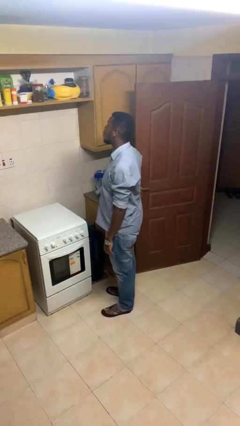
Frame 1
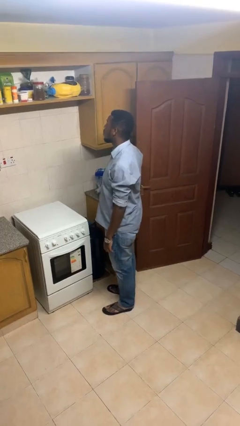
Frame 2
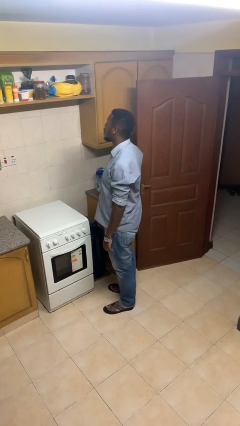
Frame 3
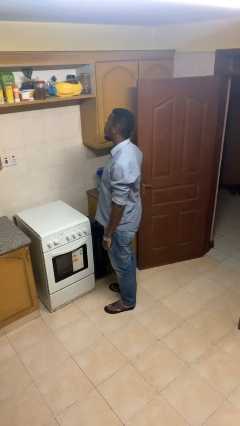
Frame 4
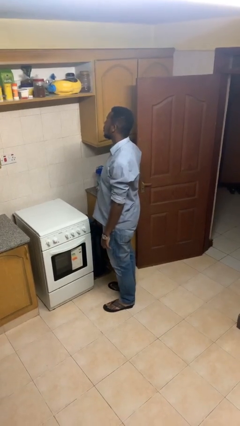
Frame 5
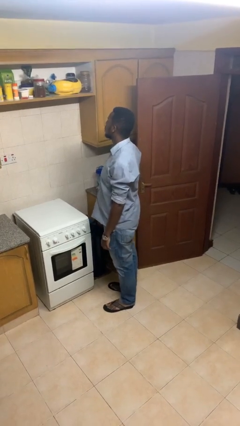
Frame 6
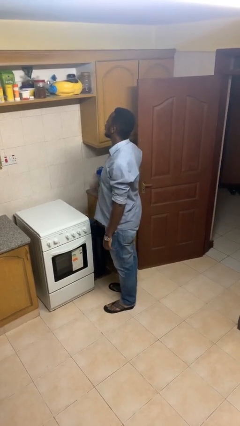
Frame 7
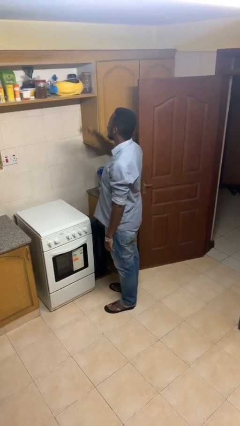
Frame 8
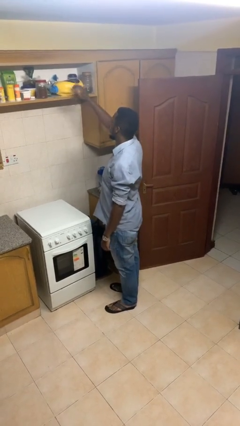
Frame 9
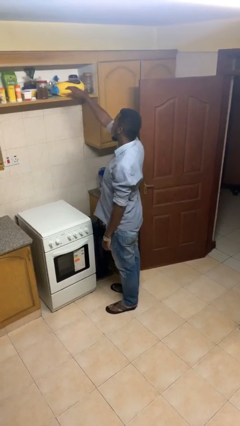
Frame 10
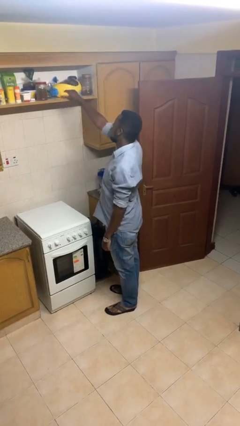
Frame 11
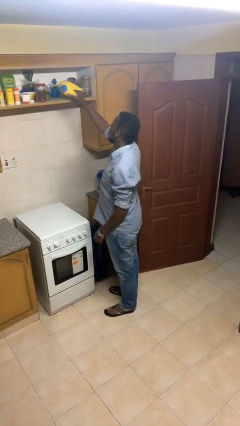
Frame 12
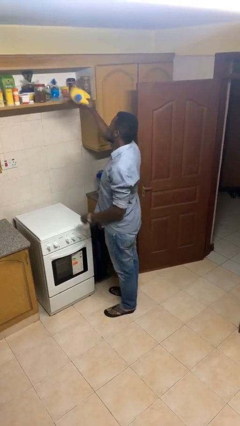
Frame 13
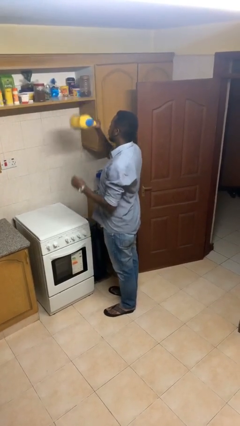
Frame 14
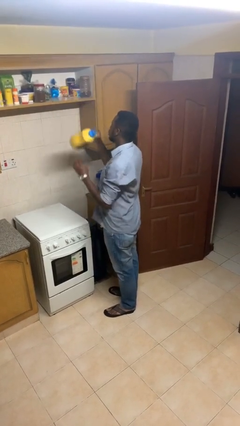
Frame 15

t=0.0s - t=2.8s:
person picks up object from shelf

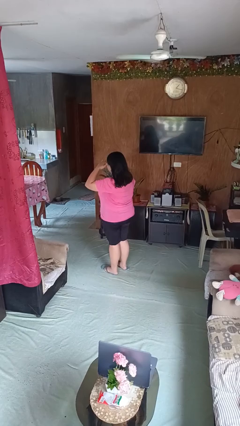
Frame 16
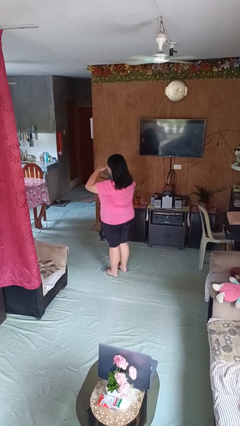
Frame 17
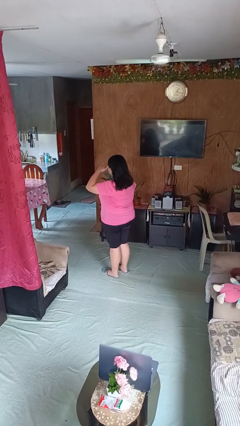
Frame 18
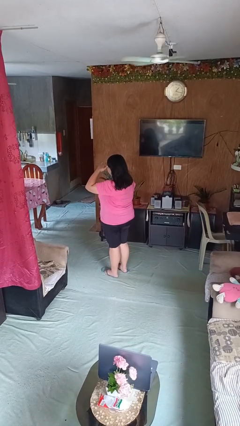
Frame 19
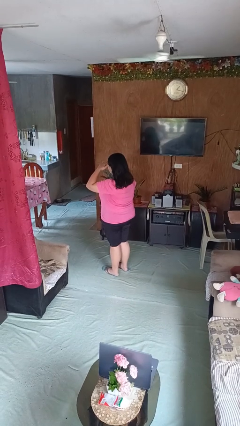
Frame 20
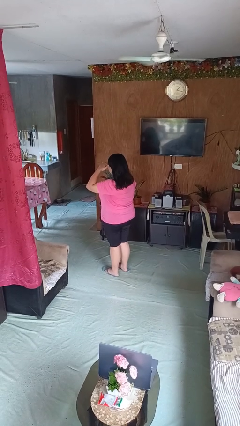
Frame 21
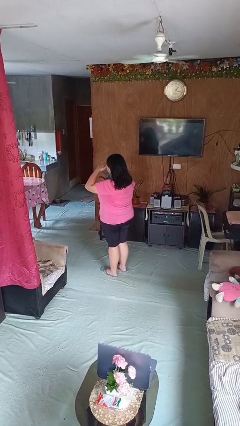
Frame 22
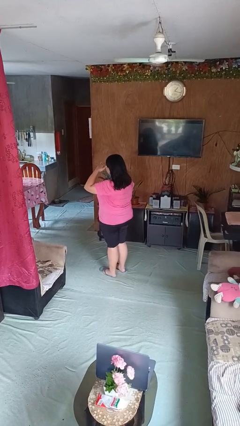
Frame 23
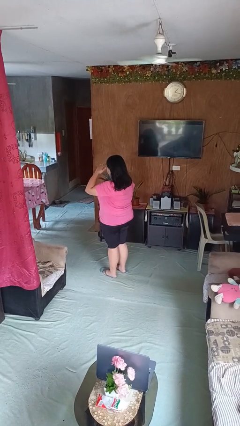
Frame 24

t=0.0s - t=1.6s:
person salutes

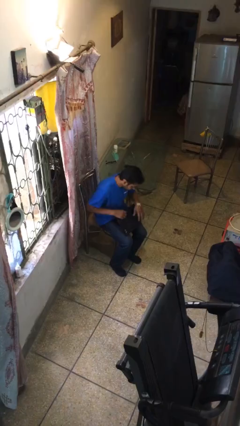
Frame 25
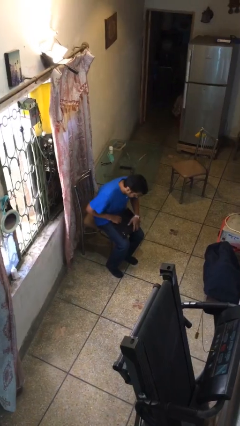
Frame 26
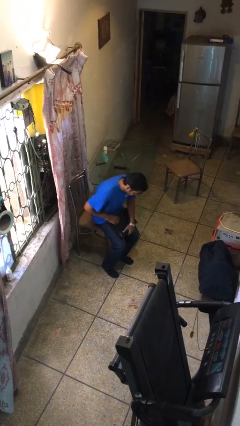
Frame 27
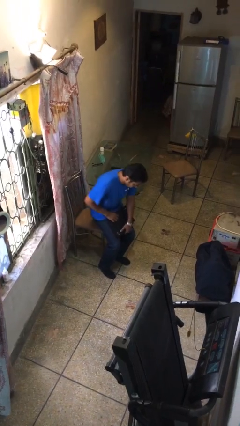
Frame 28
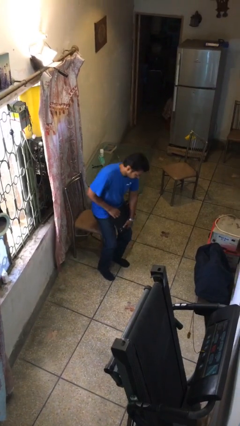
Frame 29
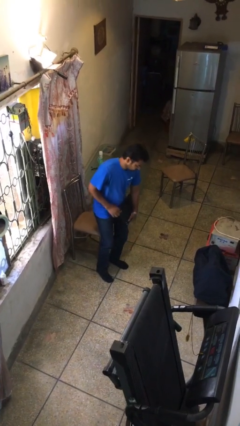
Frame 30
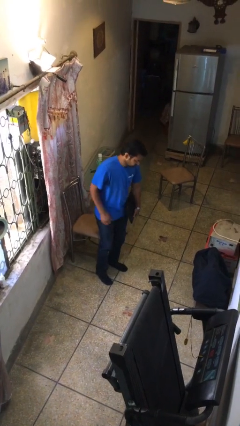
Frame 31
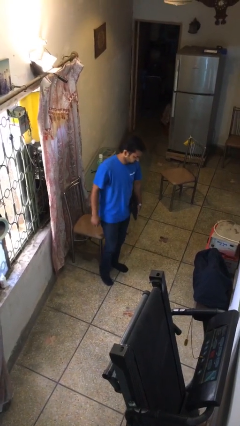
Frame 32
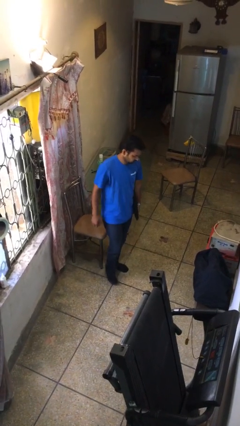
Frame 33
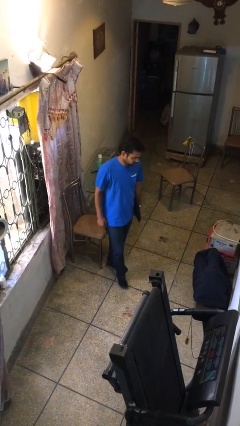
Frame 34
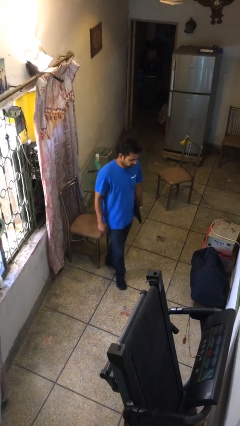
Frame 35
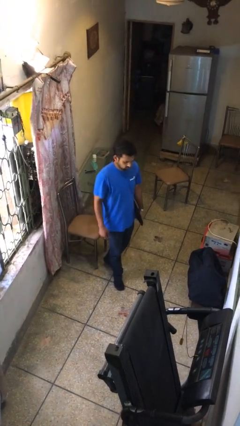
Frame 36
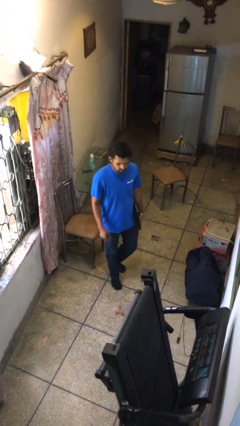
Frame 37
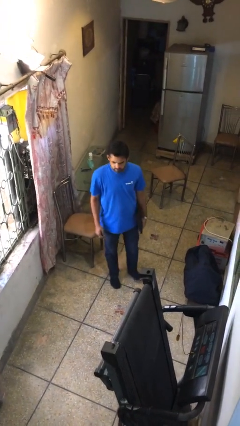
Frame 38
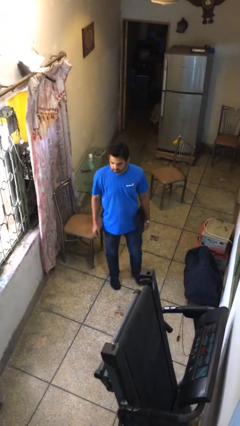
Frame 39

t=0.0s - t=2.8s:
person stands up

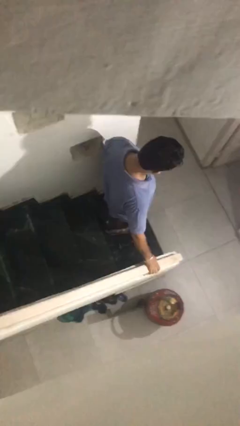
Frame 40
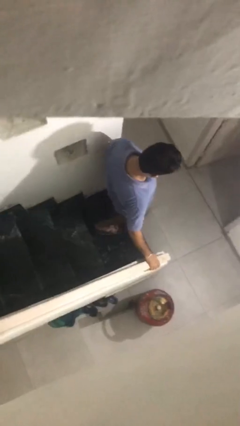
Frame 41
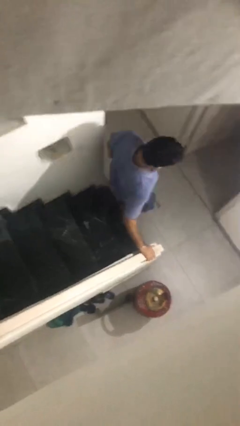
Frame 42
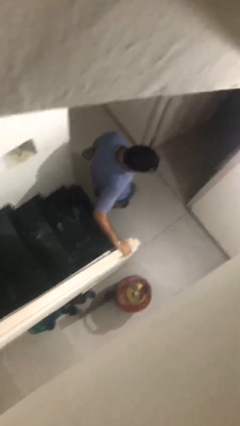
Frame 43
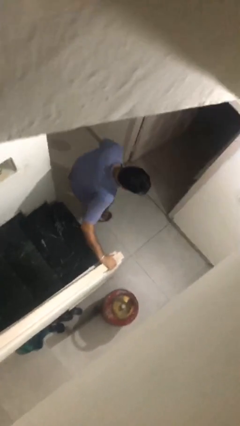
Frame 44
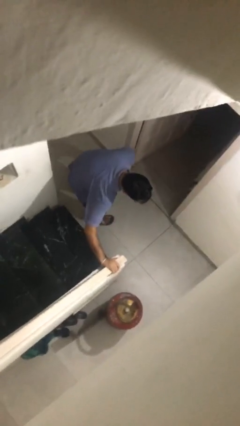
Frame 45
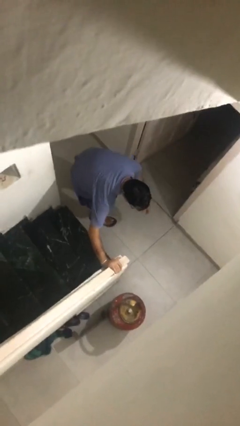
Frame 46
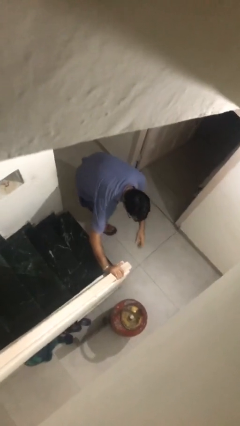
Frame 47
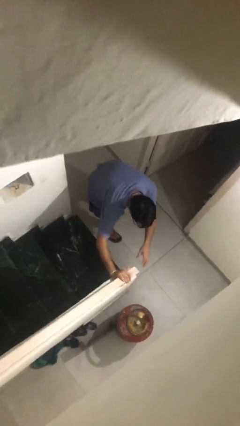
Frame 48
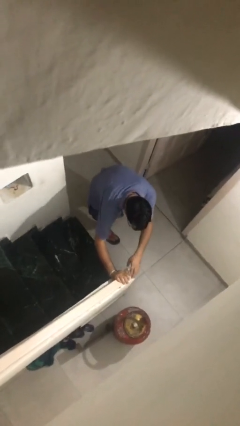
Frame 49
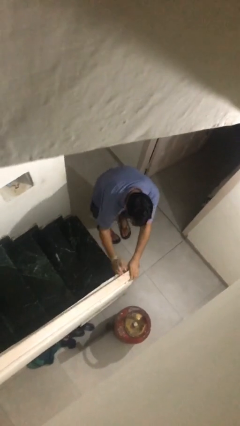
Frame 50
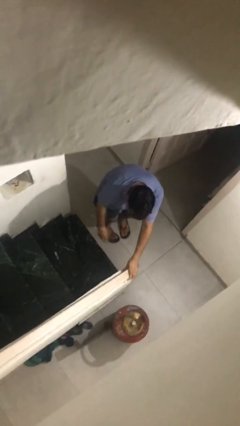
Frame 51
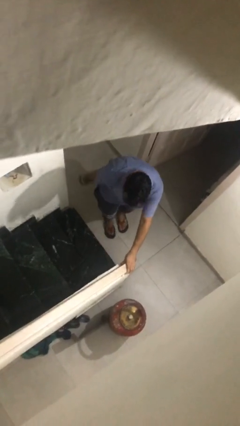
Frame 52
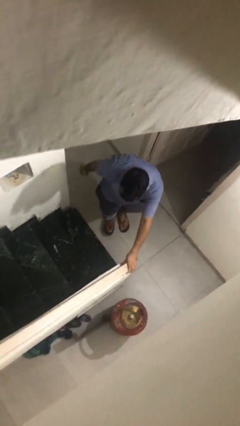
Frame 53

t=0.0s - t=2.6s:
person trips on stair

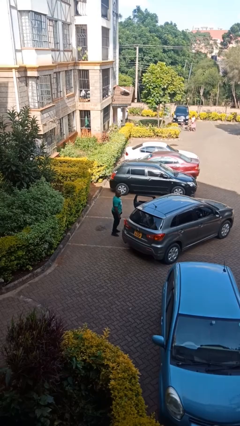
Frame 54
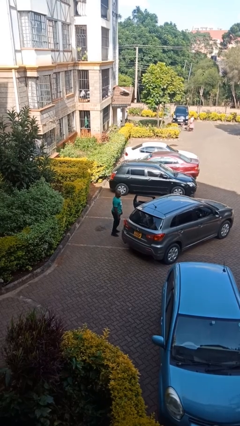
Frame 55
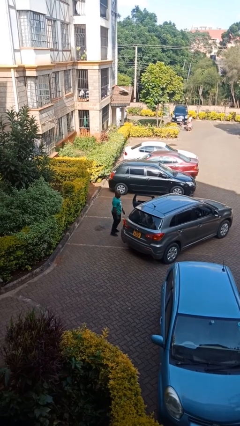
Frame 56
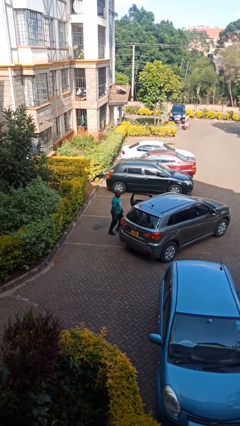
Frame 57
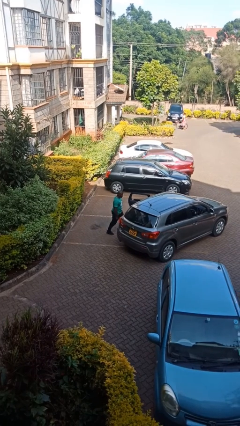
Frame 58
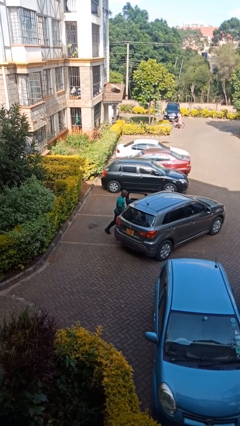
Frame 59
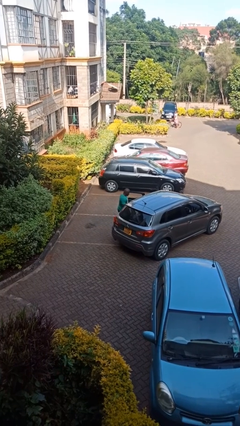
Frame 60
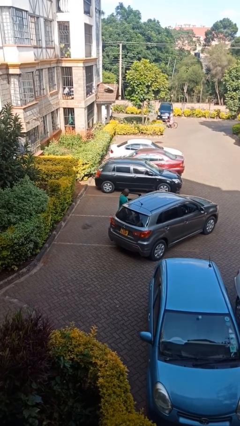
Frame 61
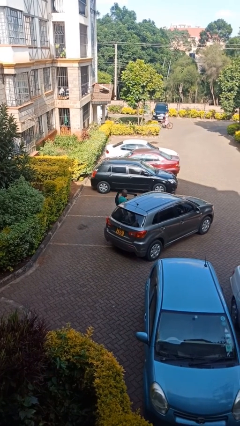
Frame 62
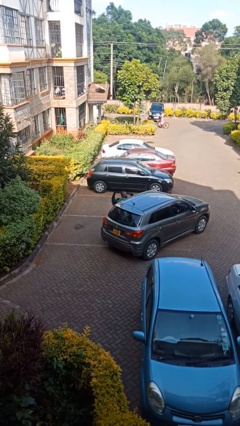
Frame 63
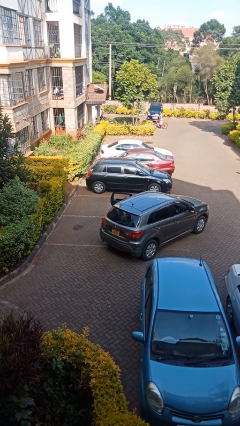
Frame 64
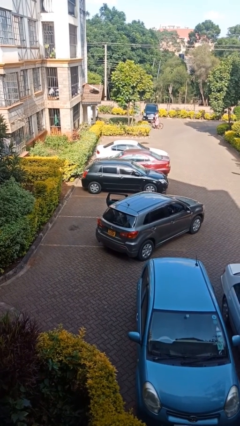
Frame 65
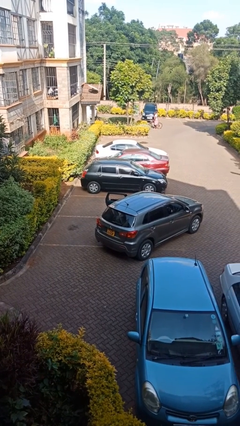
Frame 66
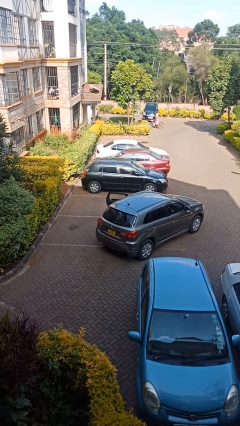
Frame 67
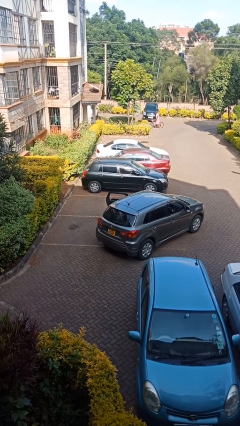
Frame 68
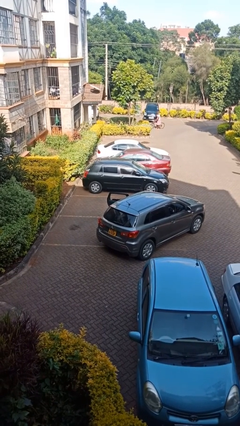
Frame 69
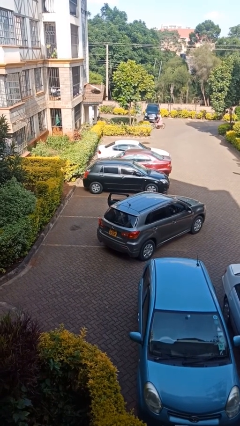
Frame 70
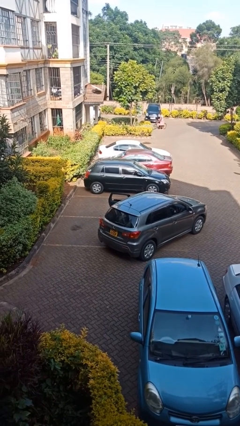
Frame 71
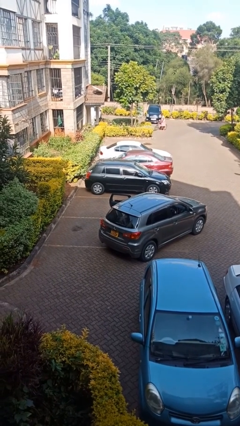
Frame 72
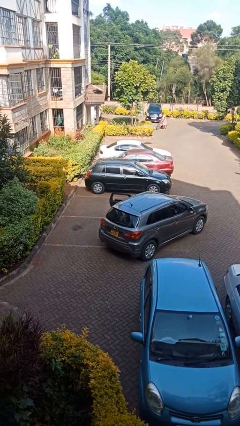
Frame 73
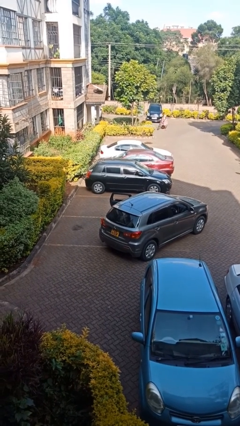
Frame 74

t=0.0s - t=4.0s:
person enters car

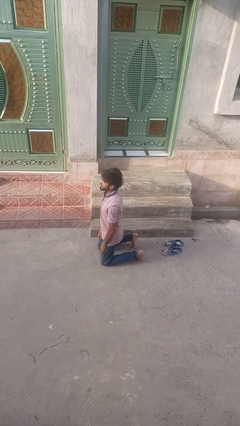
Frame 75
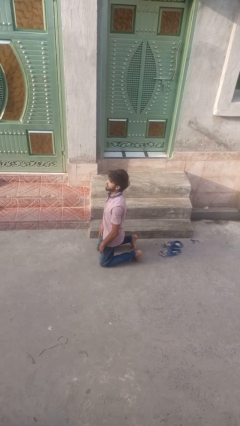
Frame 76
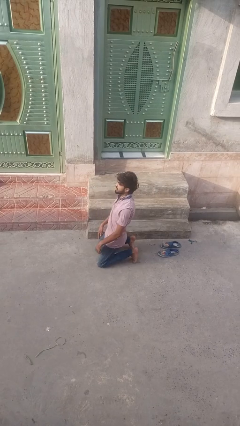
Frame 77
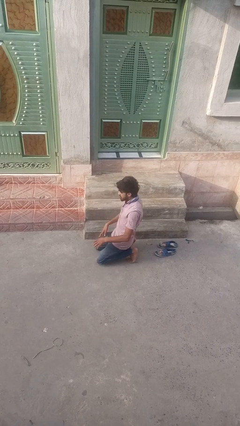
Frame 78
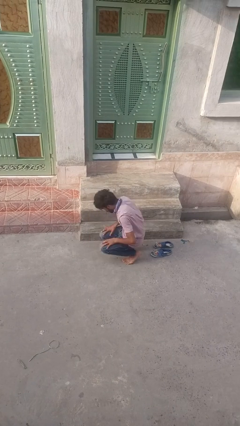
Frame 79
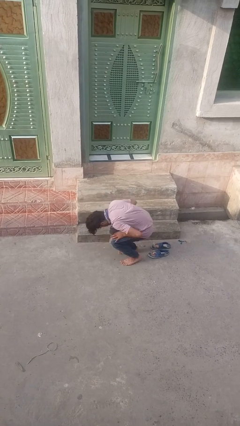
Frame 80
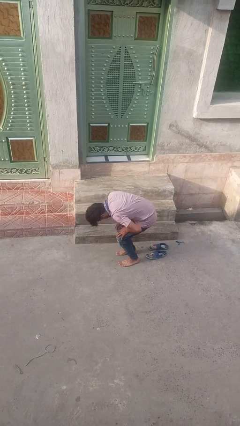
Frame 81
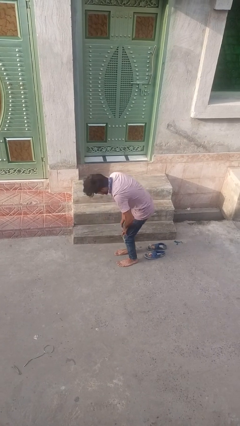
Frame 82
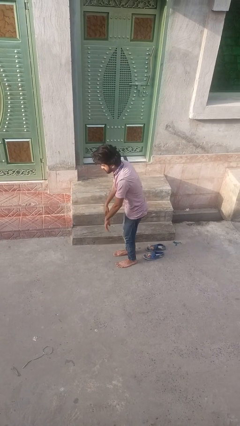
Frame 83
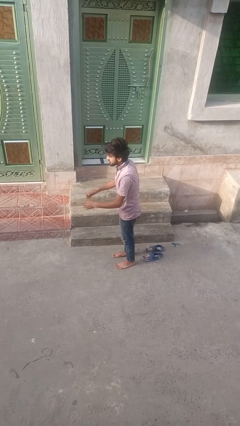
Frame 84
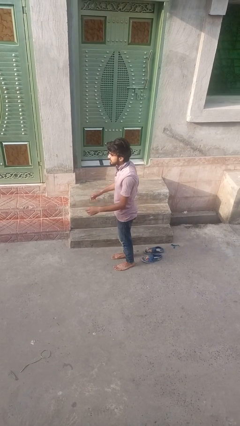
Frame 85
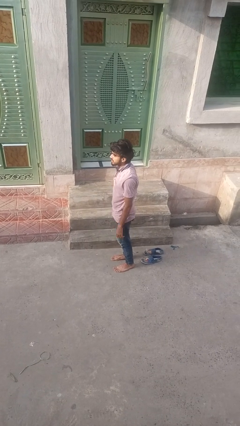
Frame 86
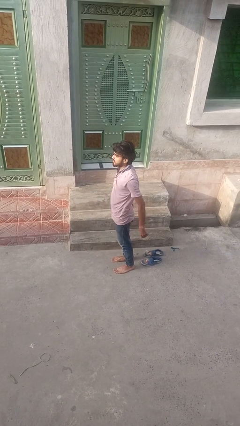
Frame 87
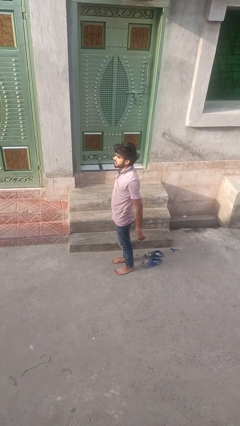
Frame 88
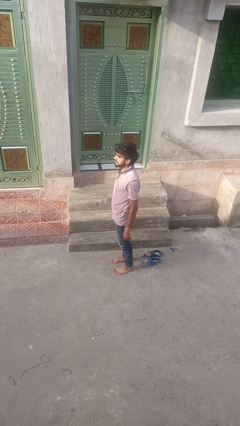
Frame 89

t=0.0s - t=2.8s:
person stands up from floor

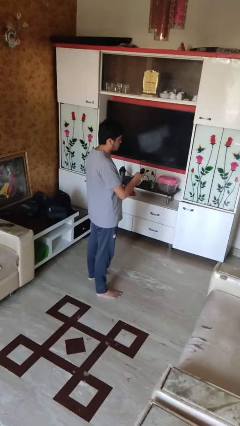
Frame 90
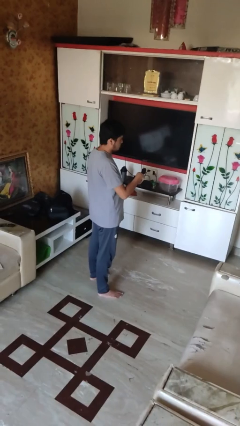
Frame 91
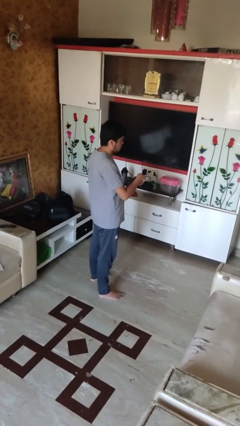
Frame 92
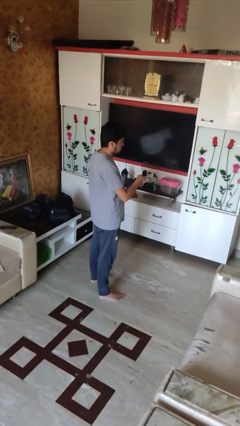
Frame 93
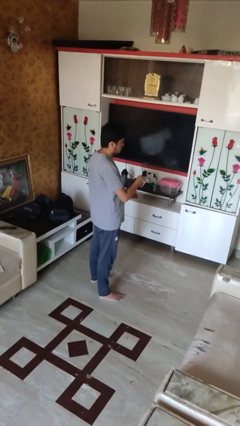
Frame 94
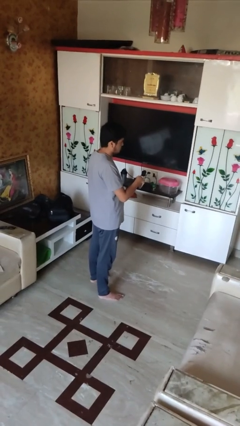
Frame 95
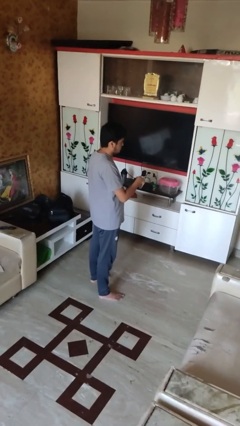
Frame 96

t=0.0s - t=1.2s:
person gestures swipe down
